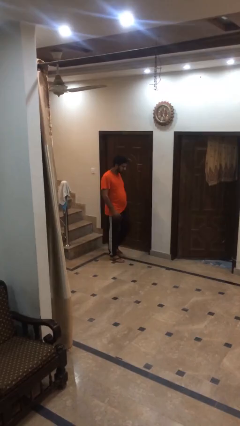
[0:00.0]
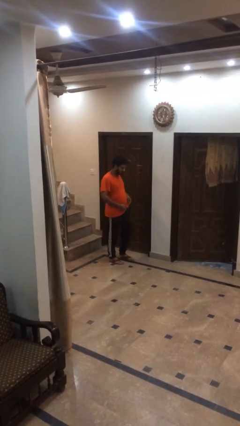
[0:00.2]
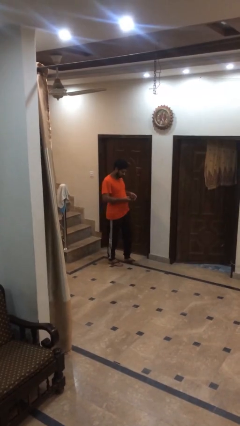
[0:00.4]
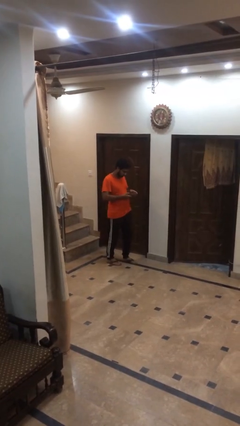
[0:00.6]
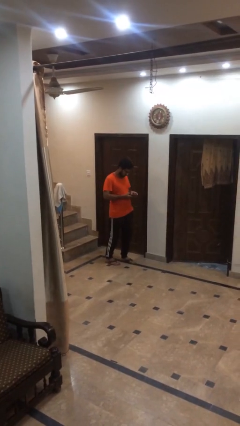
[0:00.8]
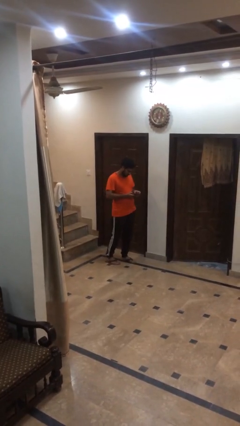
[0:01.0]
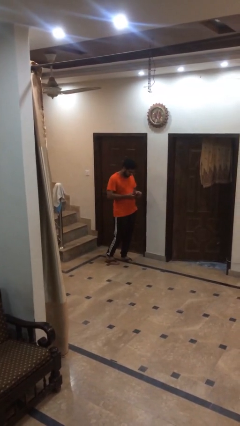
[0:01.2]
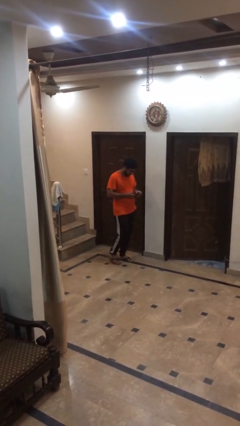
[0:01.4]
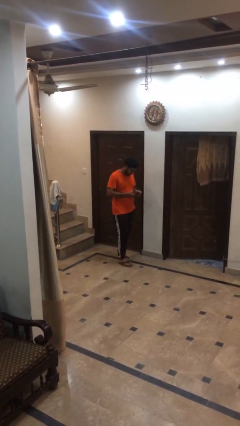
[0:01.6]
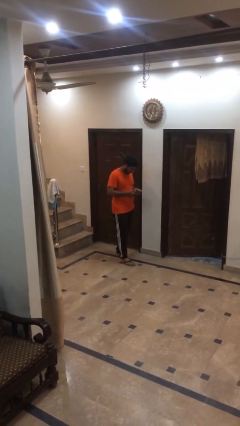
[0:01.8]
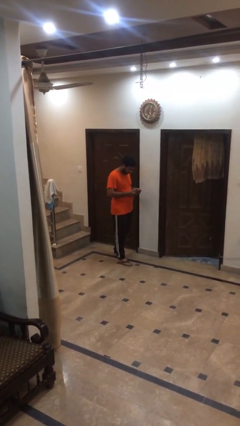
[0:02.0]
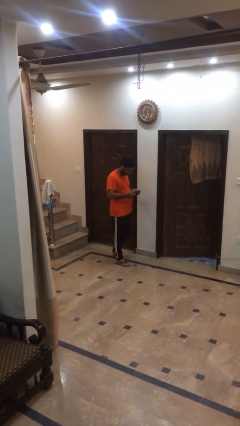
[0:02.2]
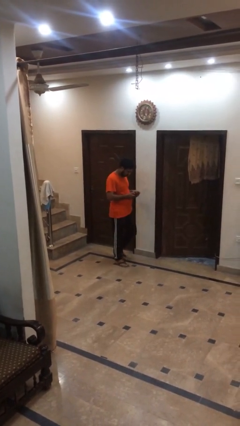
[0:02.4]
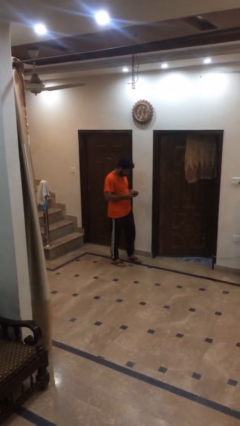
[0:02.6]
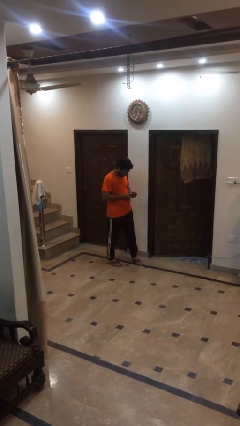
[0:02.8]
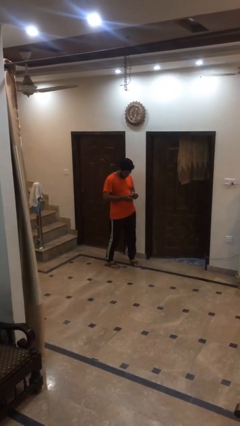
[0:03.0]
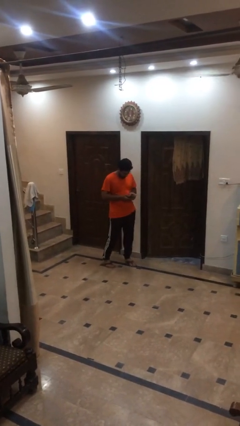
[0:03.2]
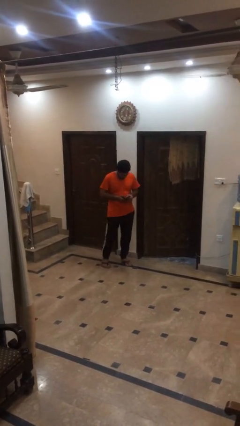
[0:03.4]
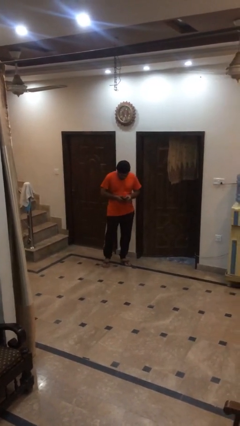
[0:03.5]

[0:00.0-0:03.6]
person texts on phone

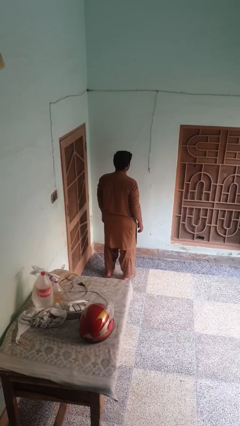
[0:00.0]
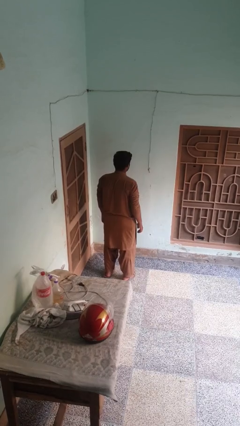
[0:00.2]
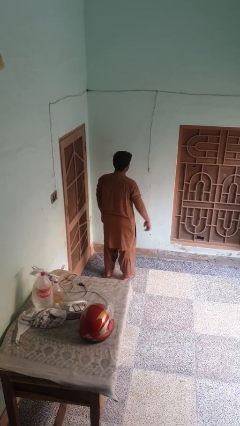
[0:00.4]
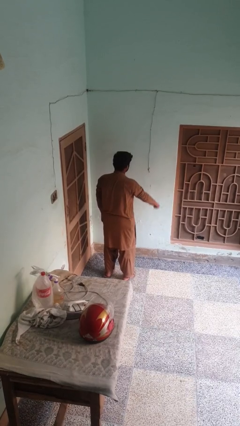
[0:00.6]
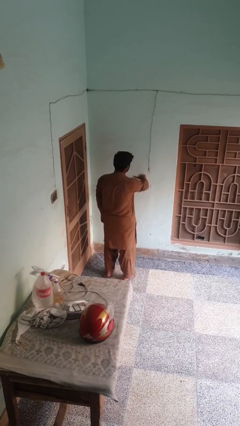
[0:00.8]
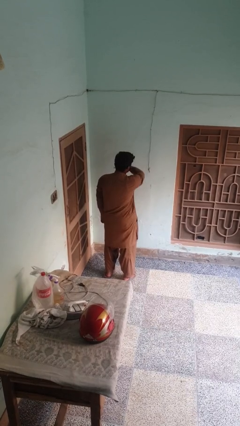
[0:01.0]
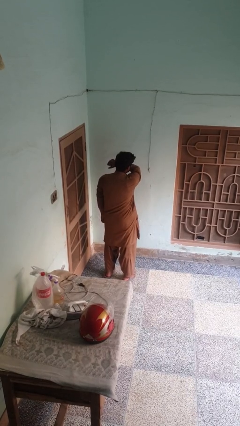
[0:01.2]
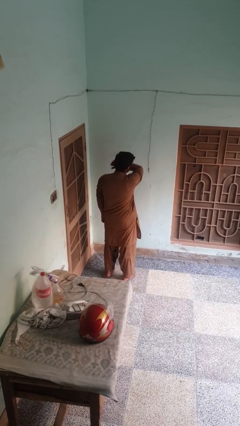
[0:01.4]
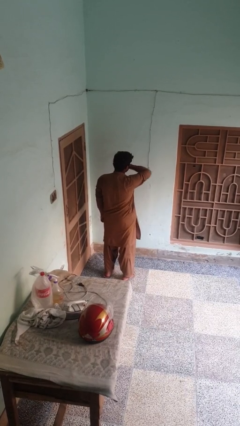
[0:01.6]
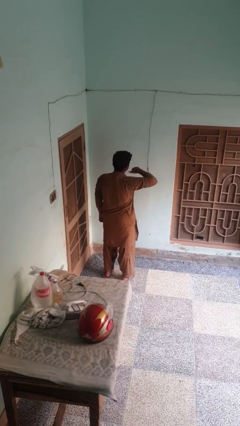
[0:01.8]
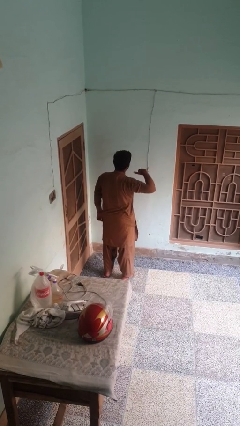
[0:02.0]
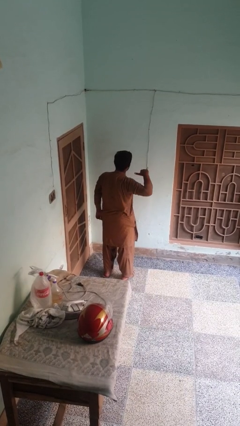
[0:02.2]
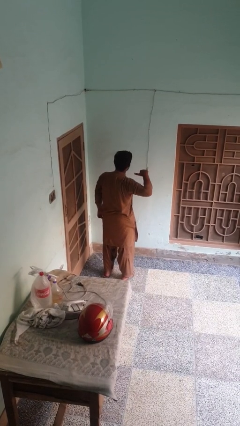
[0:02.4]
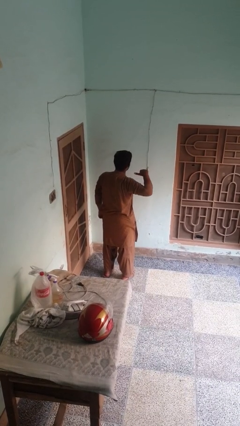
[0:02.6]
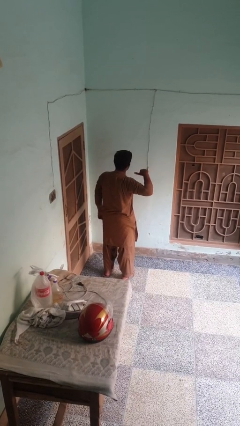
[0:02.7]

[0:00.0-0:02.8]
person gestures cut

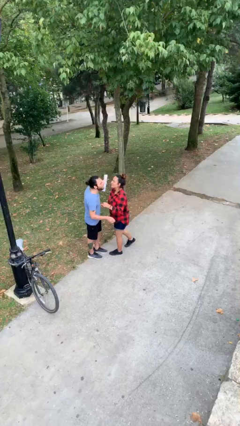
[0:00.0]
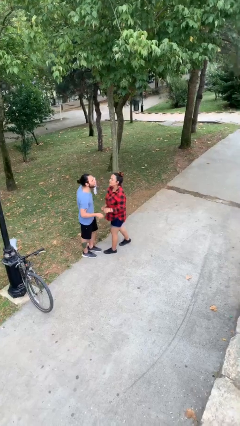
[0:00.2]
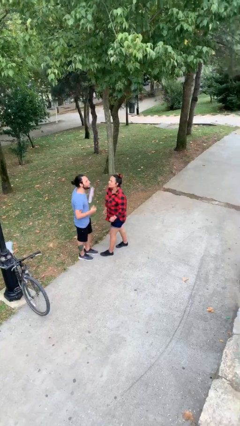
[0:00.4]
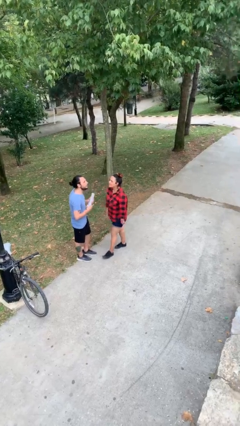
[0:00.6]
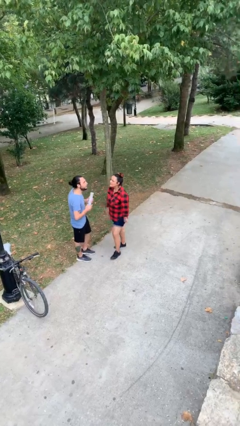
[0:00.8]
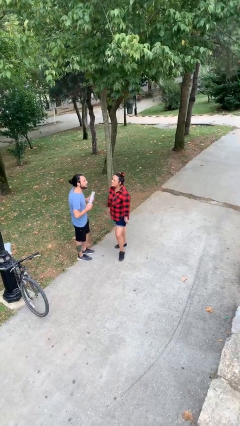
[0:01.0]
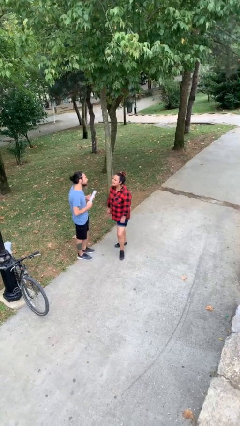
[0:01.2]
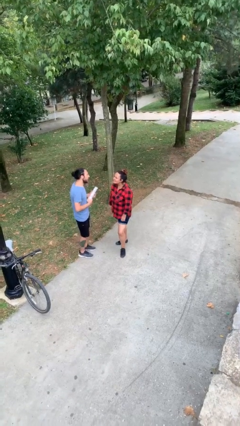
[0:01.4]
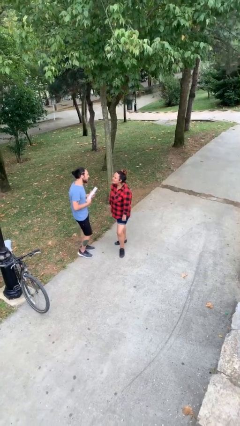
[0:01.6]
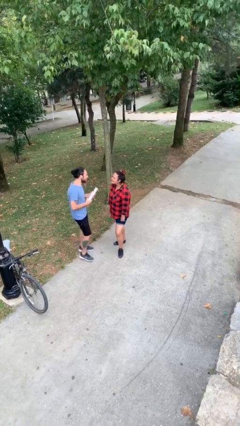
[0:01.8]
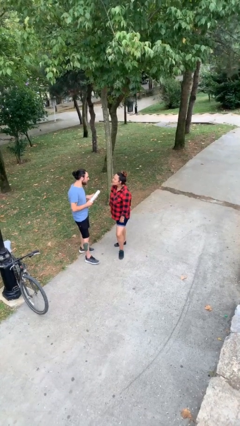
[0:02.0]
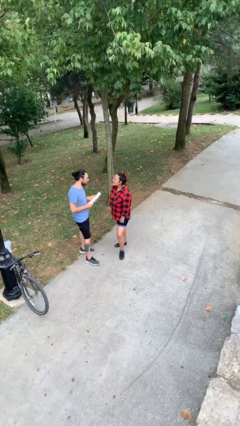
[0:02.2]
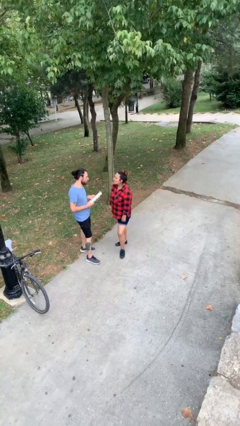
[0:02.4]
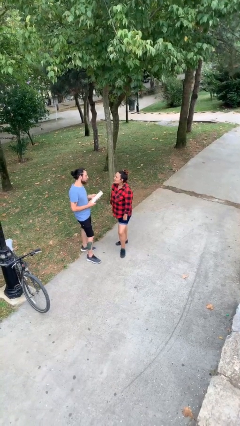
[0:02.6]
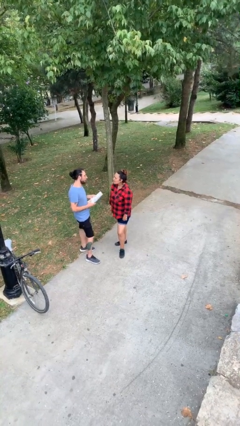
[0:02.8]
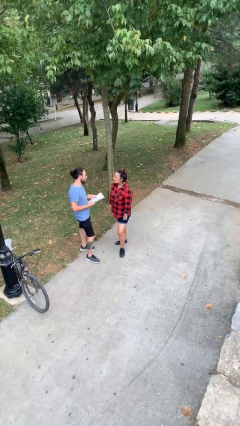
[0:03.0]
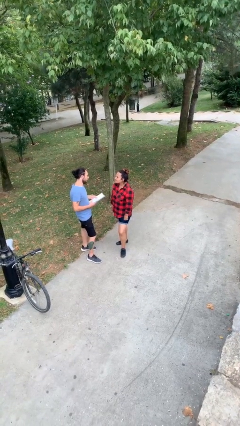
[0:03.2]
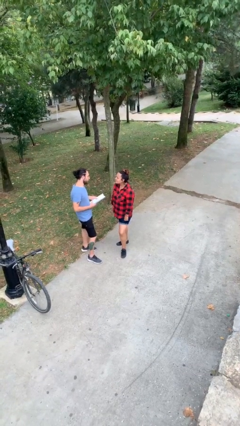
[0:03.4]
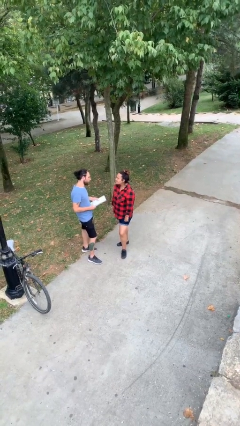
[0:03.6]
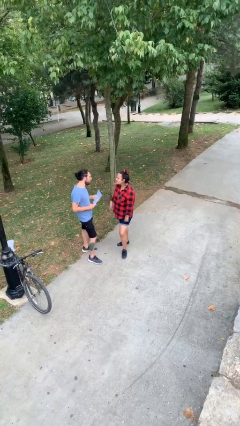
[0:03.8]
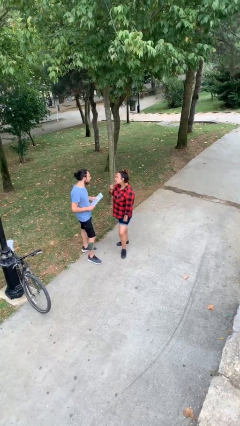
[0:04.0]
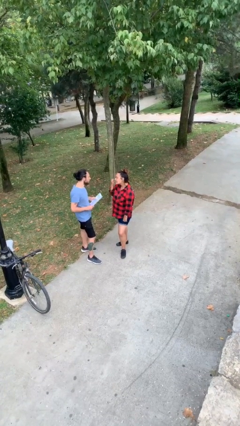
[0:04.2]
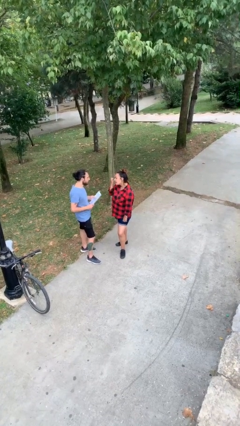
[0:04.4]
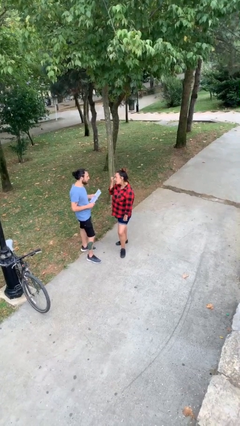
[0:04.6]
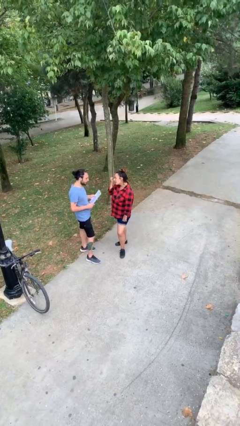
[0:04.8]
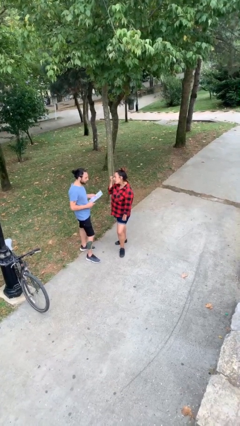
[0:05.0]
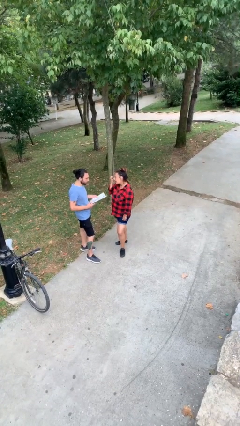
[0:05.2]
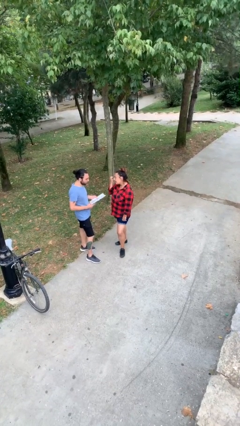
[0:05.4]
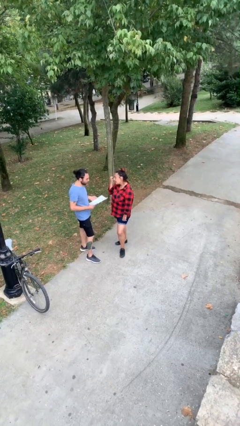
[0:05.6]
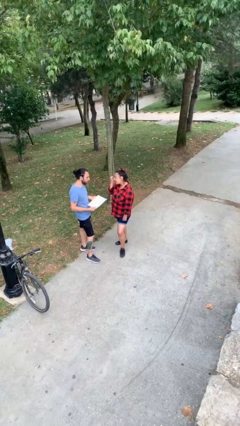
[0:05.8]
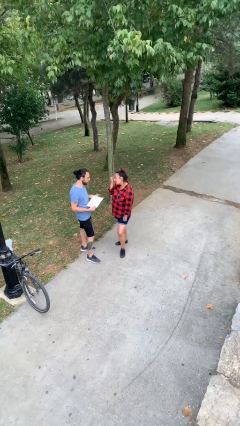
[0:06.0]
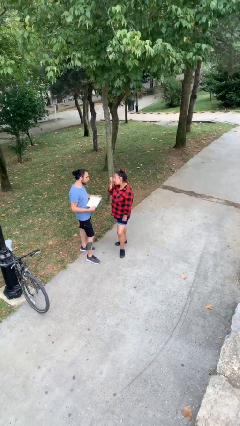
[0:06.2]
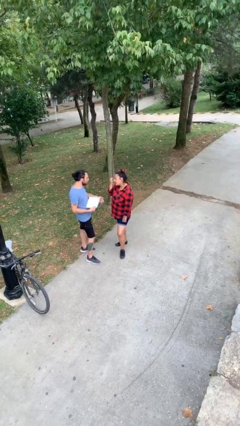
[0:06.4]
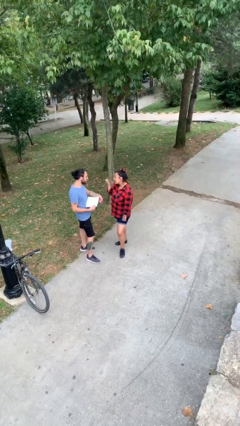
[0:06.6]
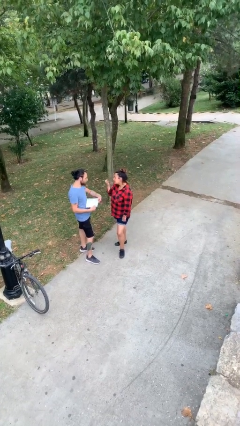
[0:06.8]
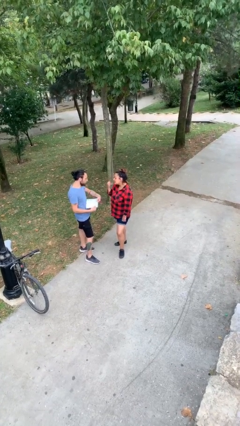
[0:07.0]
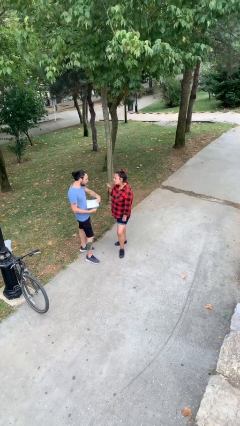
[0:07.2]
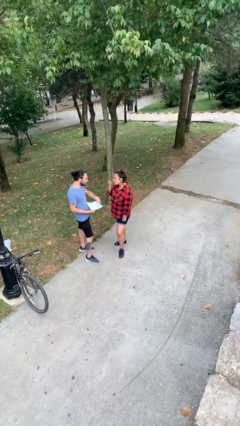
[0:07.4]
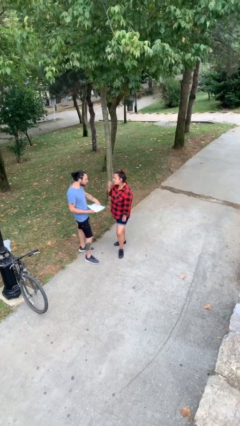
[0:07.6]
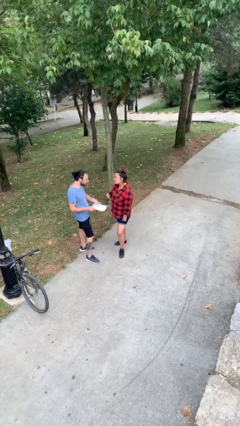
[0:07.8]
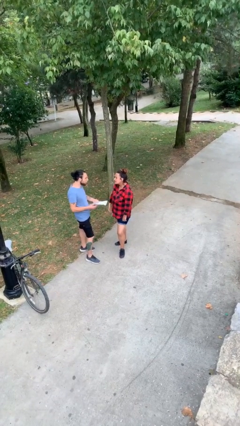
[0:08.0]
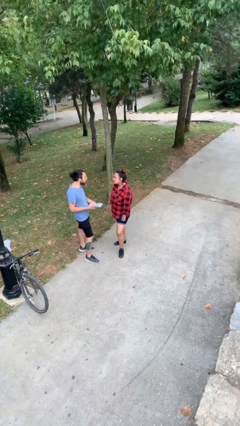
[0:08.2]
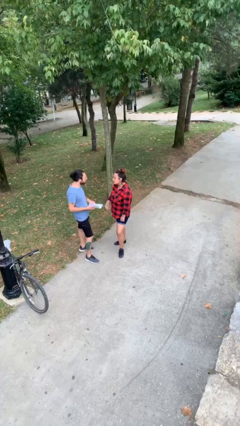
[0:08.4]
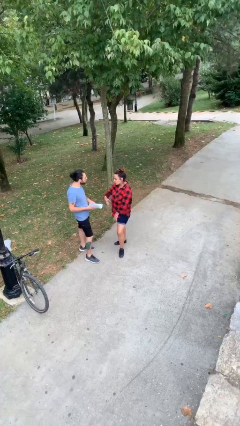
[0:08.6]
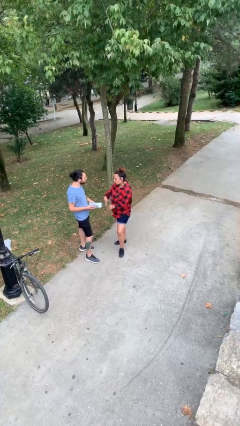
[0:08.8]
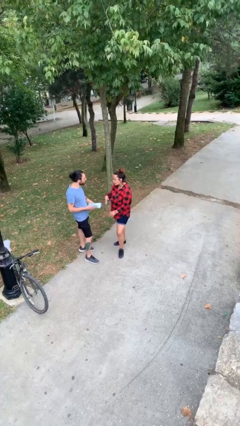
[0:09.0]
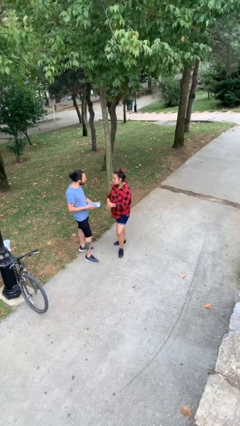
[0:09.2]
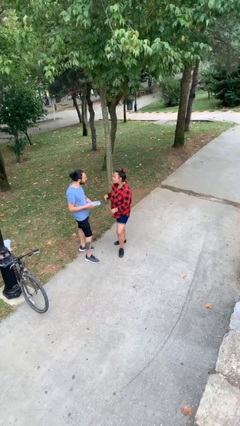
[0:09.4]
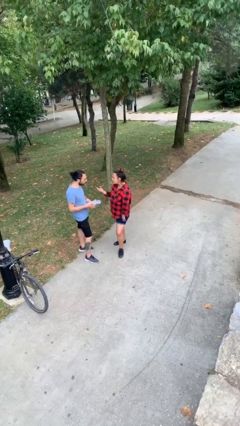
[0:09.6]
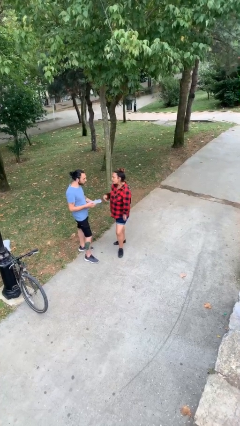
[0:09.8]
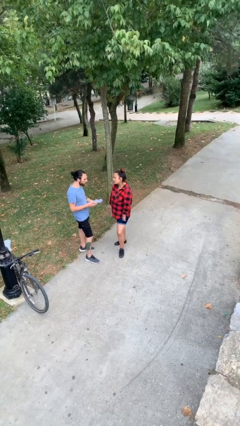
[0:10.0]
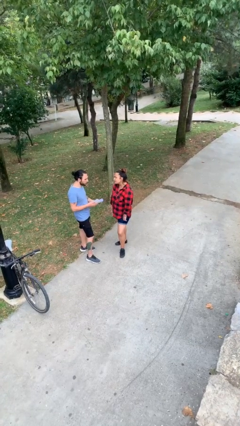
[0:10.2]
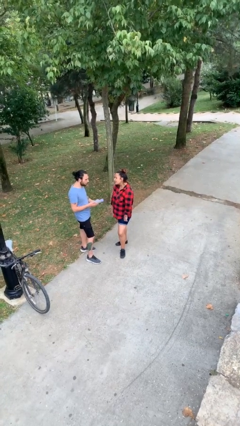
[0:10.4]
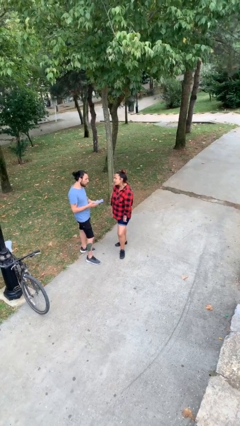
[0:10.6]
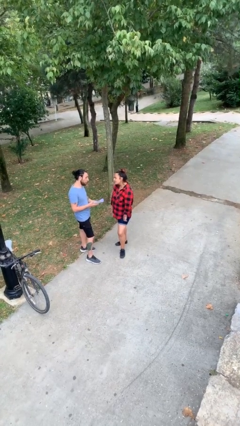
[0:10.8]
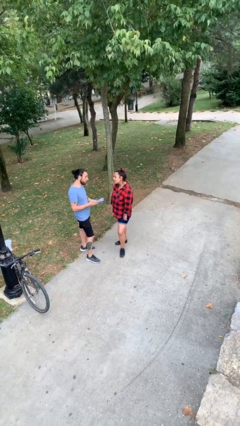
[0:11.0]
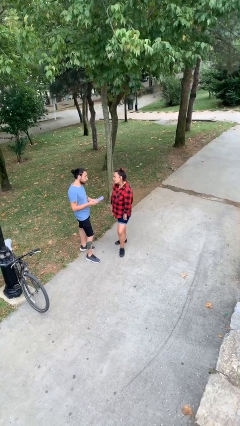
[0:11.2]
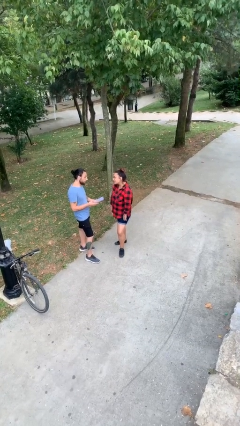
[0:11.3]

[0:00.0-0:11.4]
person talks to person

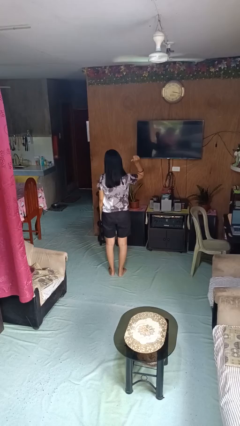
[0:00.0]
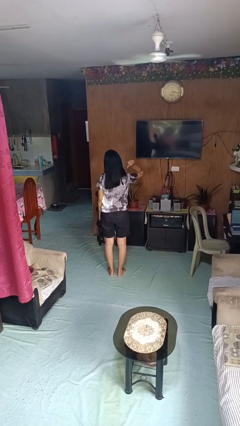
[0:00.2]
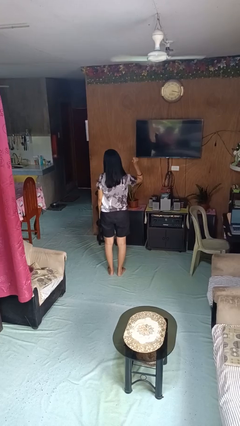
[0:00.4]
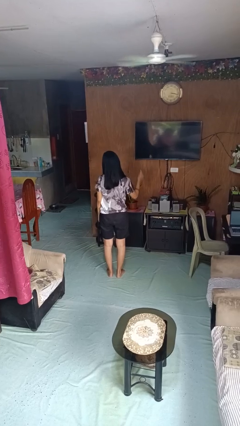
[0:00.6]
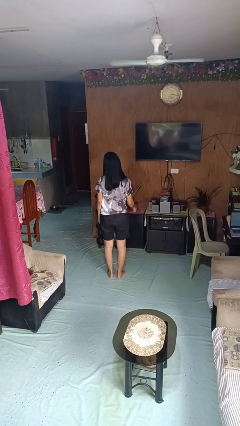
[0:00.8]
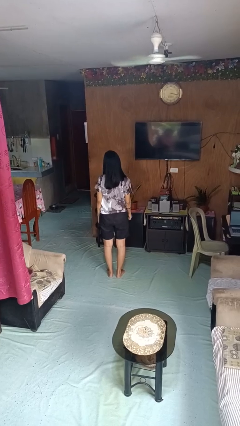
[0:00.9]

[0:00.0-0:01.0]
person gestures behind me
